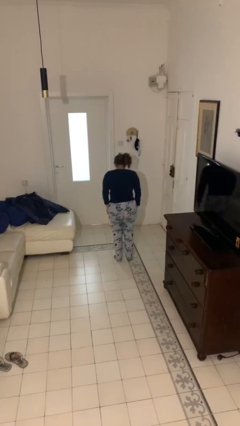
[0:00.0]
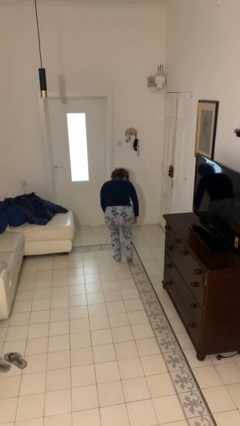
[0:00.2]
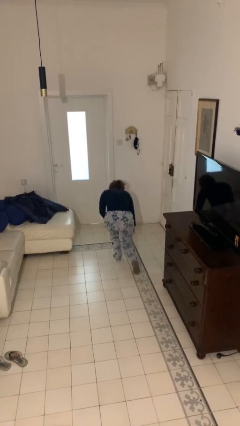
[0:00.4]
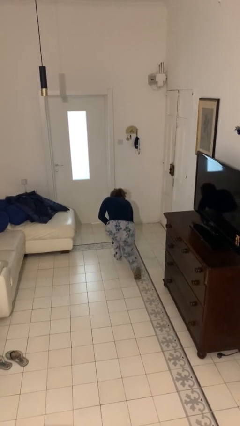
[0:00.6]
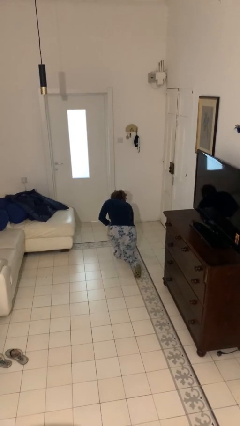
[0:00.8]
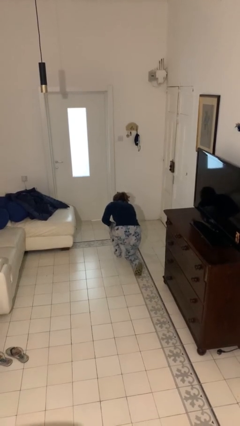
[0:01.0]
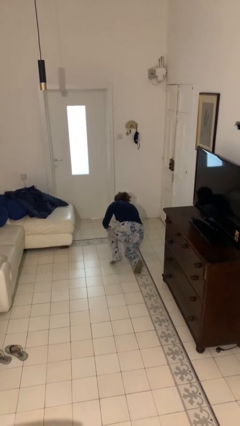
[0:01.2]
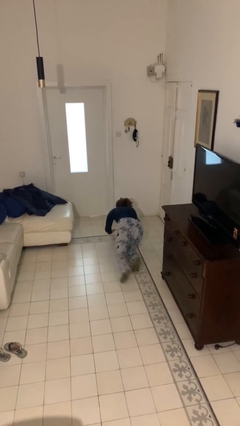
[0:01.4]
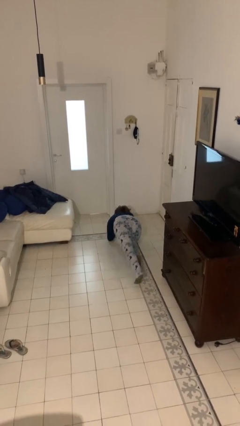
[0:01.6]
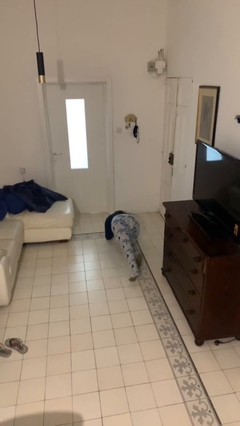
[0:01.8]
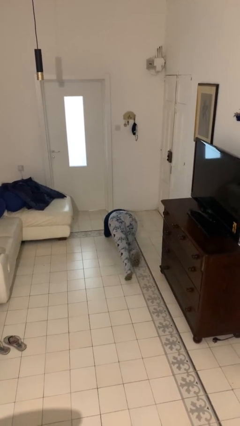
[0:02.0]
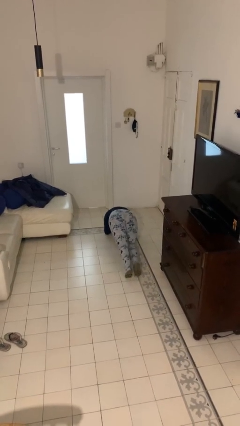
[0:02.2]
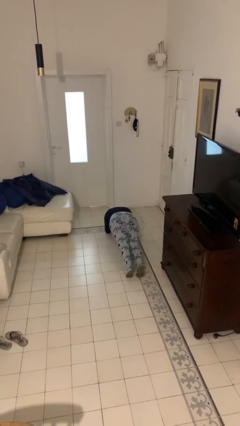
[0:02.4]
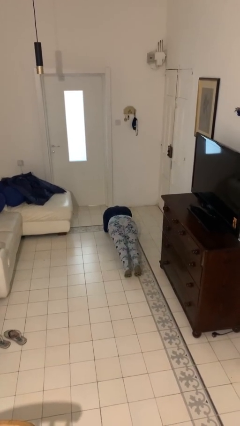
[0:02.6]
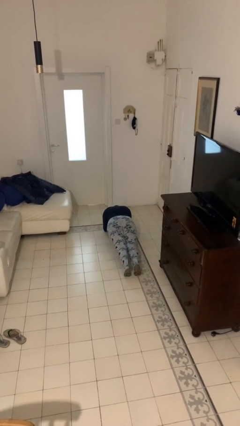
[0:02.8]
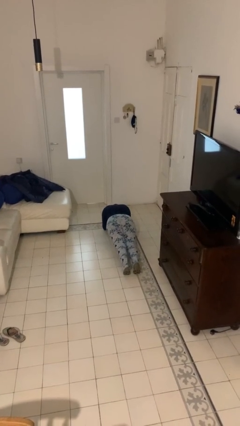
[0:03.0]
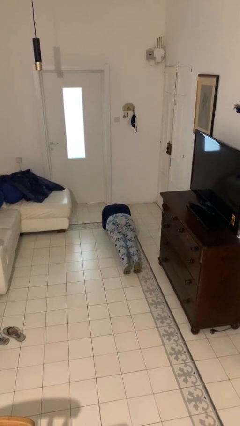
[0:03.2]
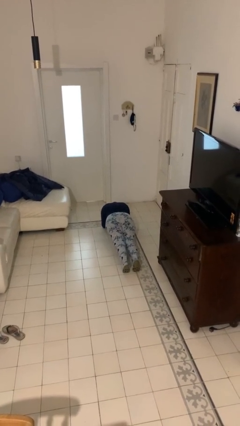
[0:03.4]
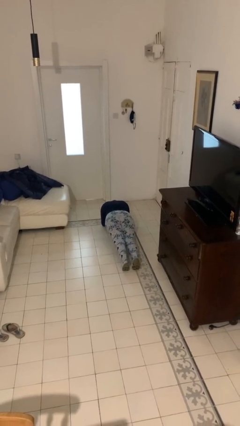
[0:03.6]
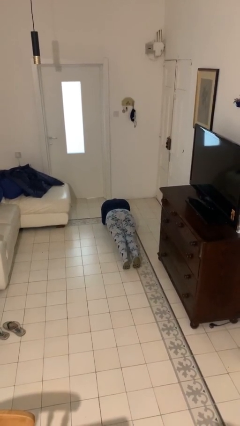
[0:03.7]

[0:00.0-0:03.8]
person exercises with plank
